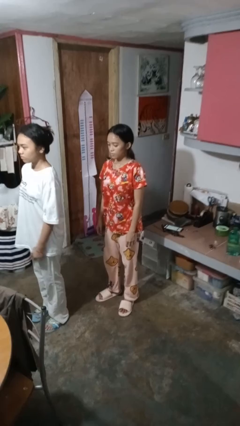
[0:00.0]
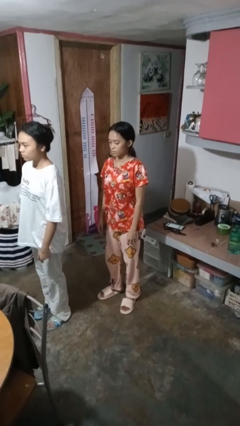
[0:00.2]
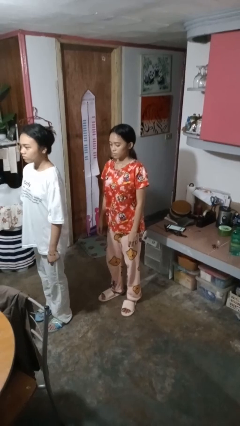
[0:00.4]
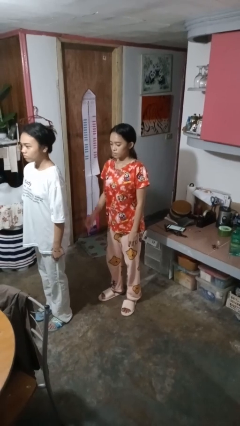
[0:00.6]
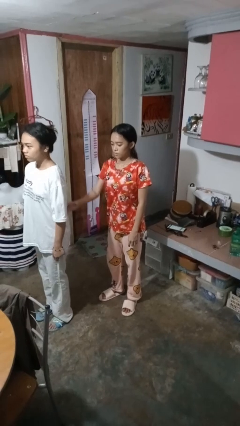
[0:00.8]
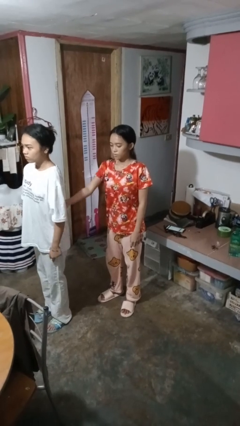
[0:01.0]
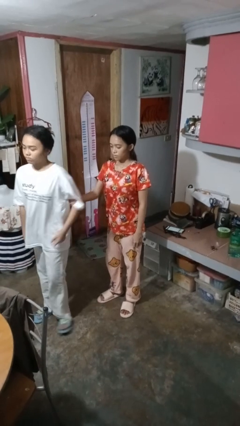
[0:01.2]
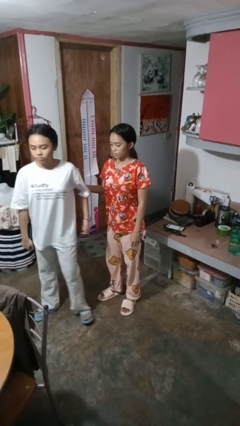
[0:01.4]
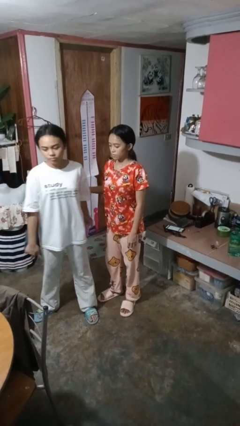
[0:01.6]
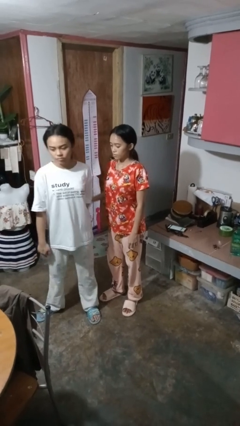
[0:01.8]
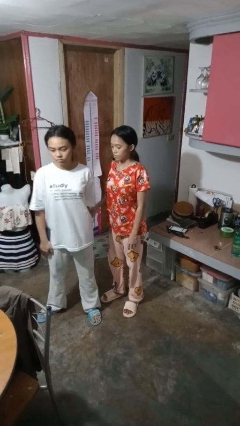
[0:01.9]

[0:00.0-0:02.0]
person grabs person by bicep

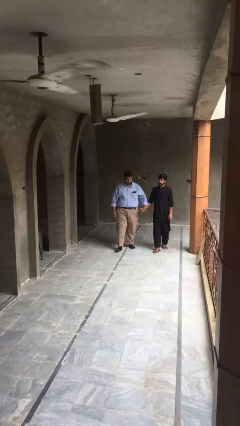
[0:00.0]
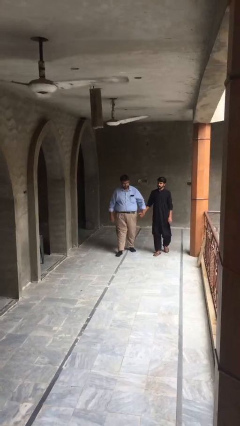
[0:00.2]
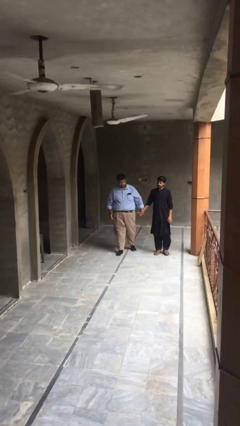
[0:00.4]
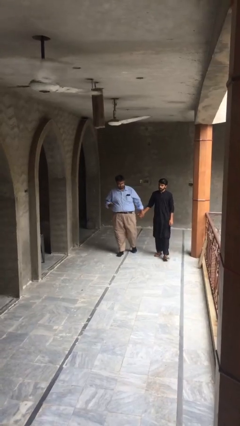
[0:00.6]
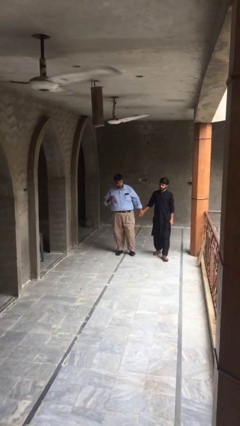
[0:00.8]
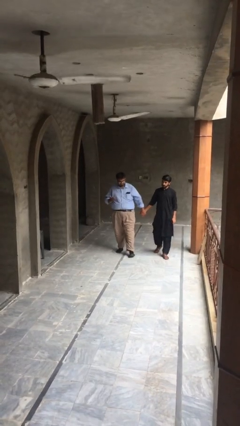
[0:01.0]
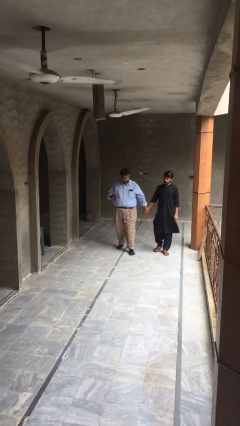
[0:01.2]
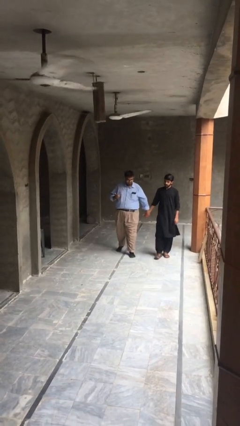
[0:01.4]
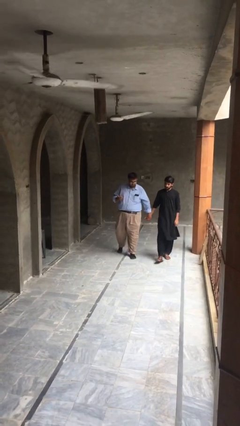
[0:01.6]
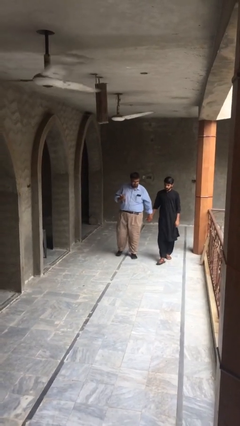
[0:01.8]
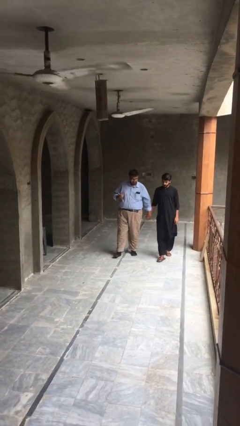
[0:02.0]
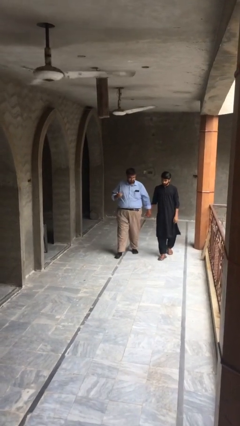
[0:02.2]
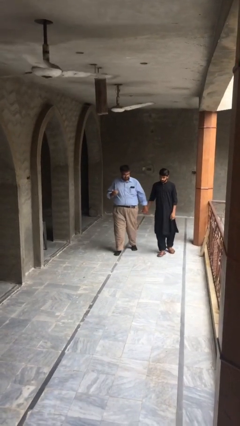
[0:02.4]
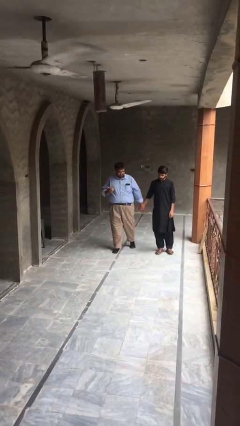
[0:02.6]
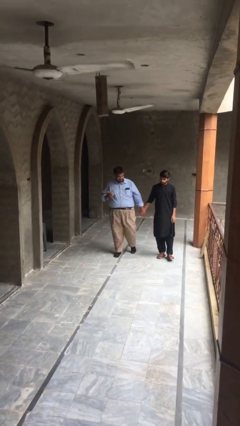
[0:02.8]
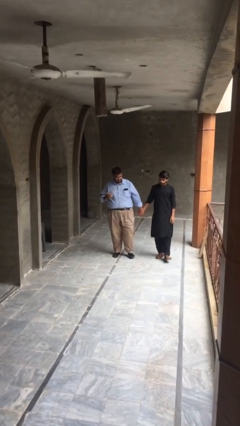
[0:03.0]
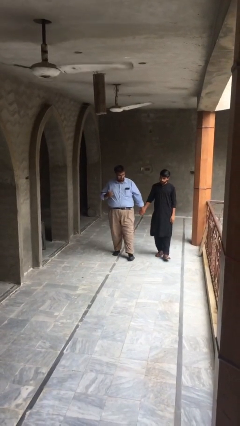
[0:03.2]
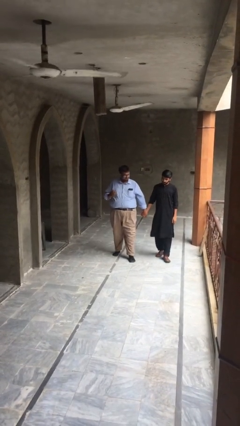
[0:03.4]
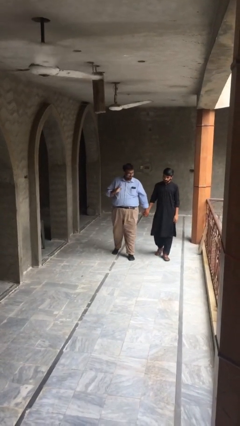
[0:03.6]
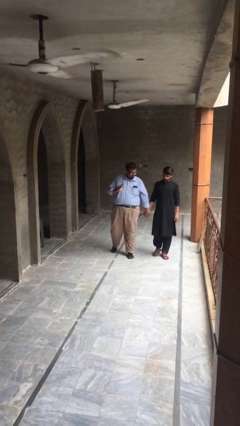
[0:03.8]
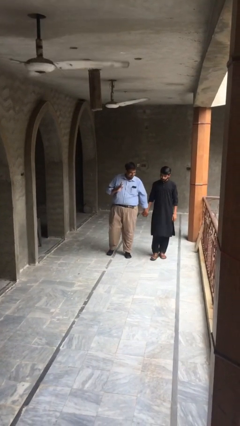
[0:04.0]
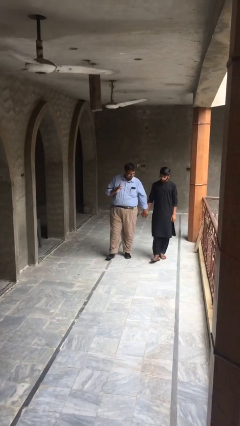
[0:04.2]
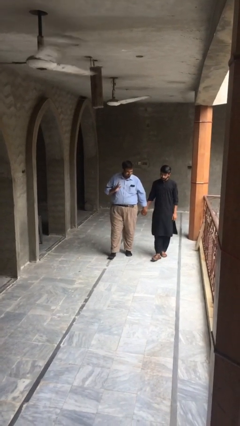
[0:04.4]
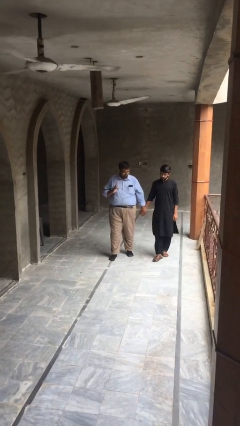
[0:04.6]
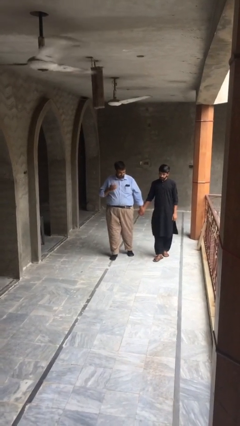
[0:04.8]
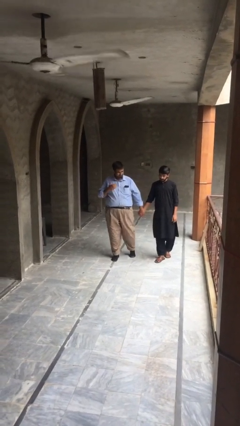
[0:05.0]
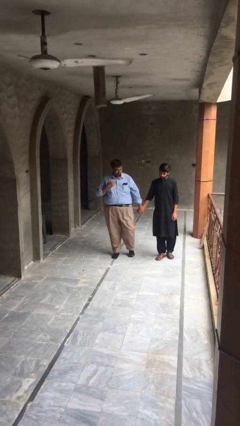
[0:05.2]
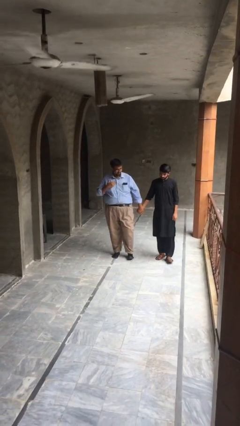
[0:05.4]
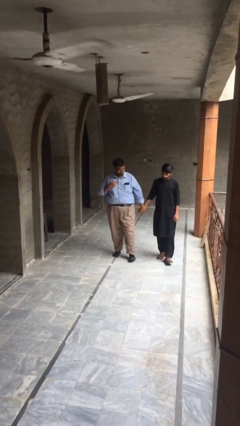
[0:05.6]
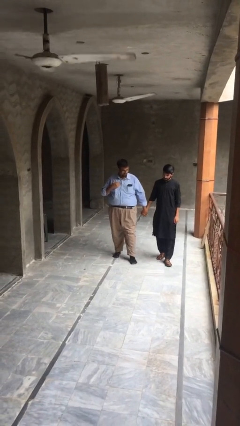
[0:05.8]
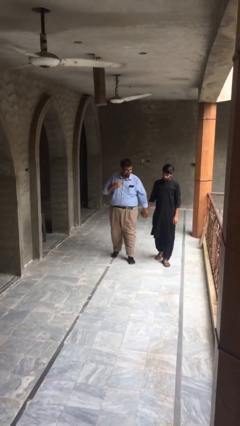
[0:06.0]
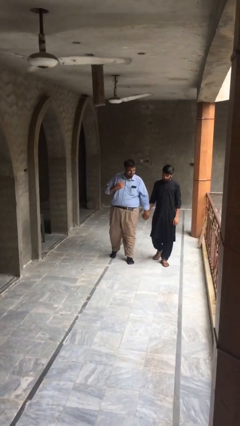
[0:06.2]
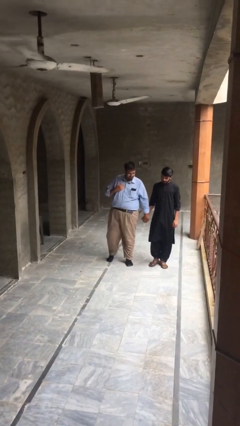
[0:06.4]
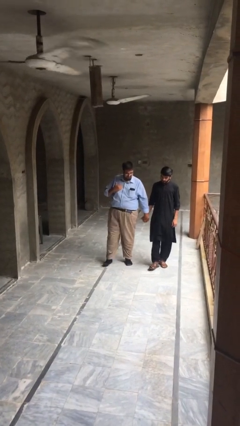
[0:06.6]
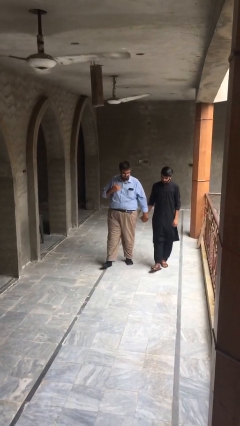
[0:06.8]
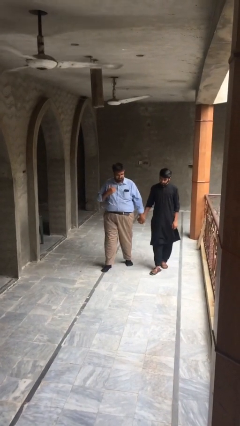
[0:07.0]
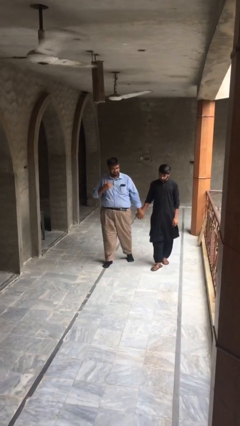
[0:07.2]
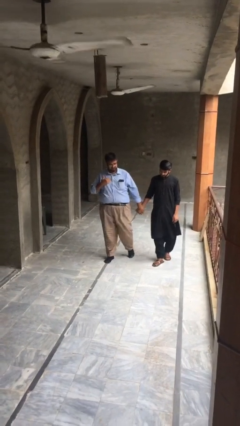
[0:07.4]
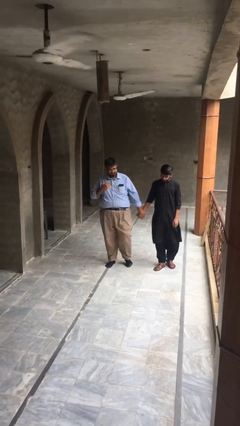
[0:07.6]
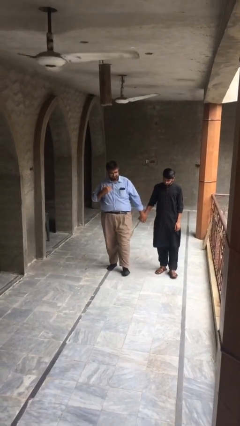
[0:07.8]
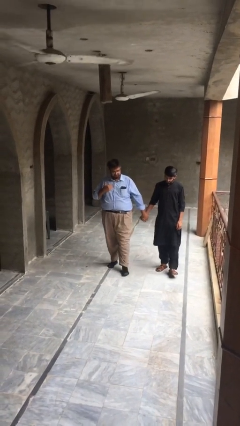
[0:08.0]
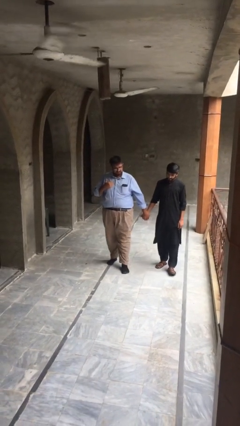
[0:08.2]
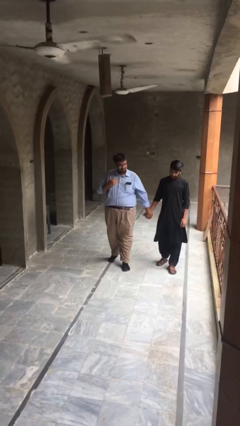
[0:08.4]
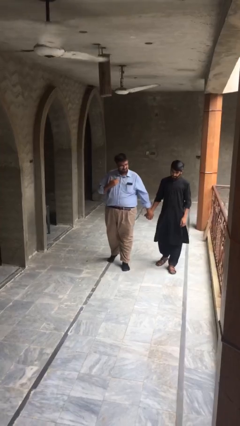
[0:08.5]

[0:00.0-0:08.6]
person holds hand

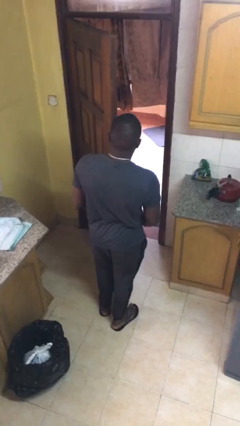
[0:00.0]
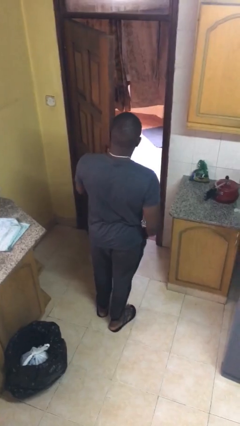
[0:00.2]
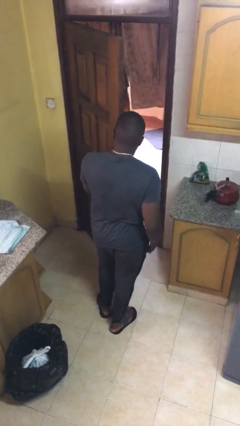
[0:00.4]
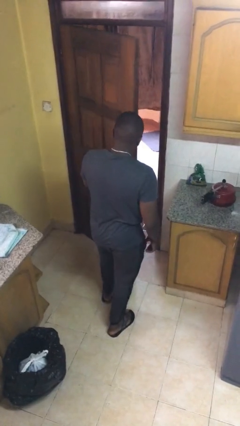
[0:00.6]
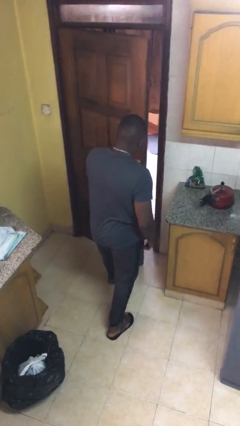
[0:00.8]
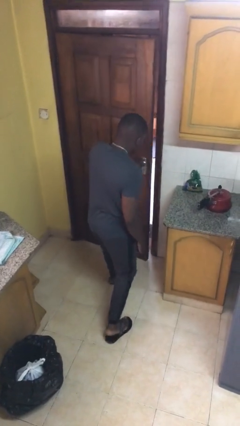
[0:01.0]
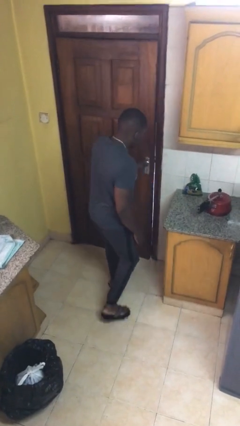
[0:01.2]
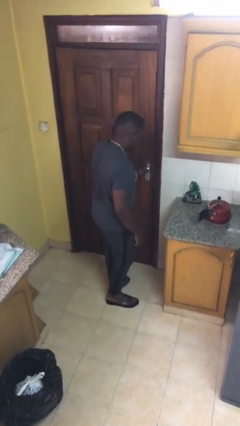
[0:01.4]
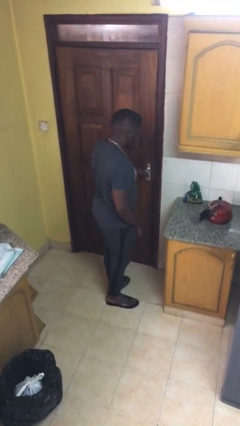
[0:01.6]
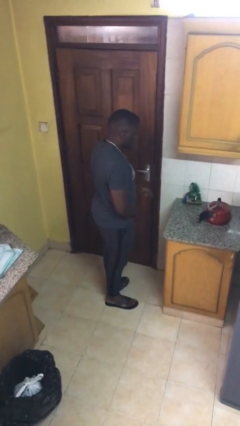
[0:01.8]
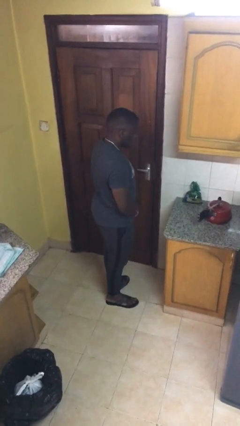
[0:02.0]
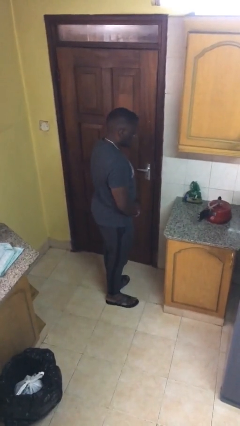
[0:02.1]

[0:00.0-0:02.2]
person closes facility door

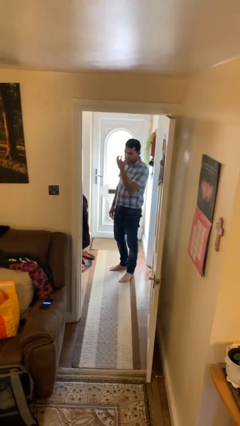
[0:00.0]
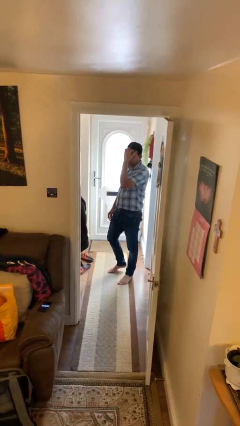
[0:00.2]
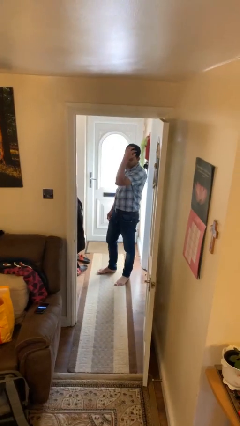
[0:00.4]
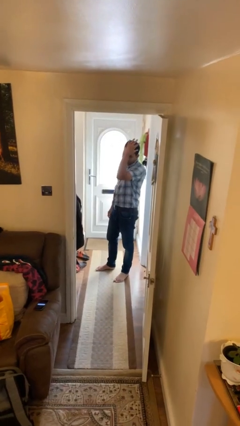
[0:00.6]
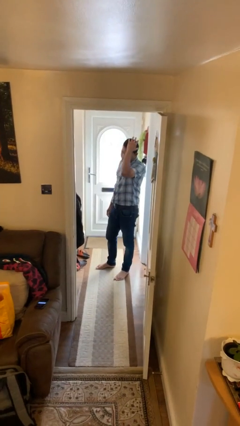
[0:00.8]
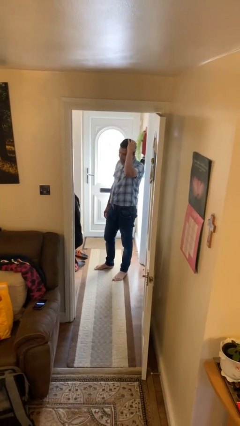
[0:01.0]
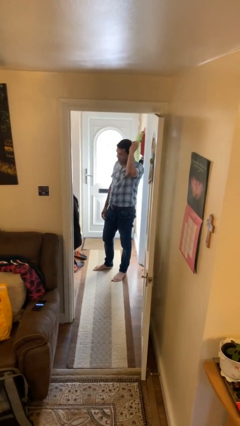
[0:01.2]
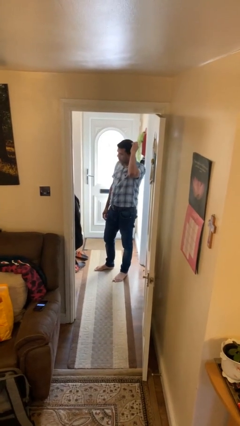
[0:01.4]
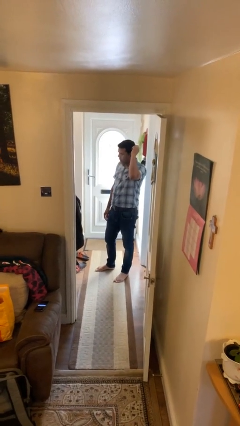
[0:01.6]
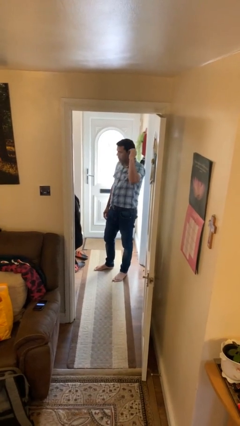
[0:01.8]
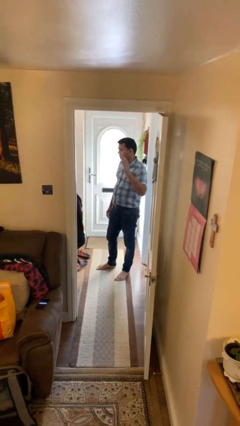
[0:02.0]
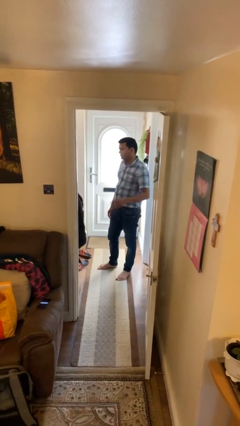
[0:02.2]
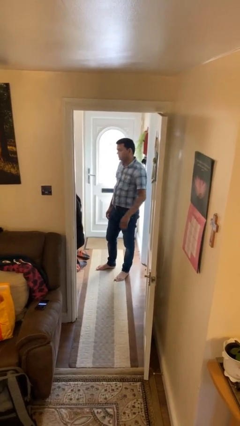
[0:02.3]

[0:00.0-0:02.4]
person strokes hair

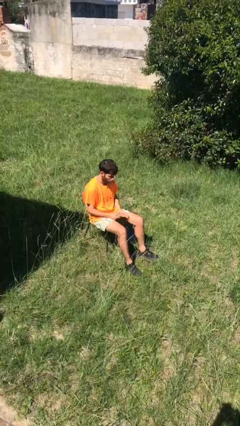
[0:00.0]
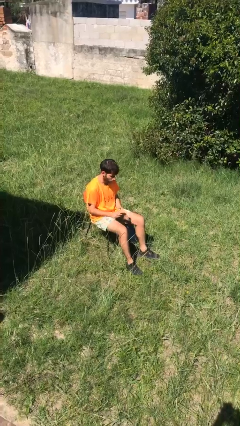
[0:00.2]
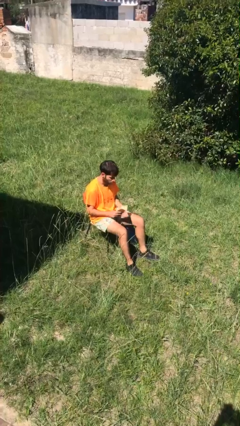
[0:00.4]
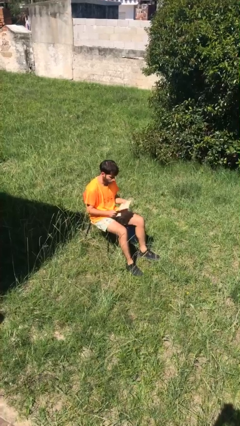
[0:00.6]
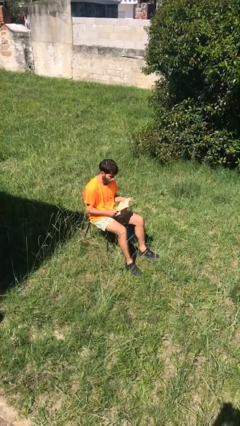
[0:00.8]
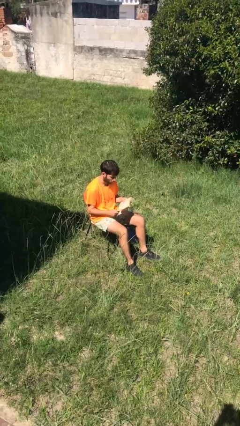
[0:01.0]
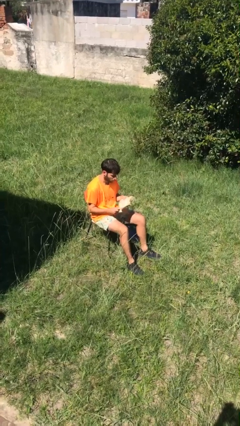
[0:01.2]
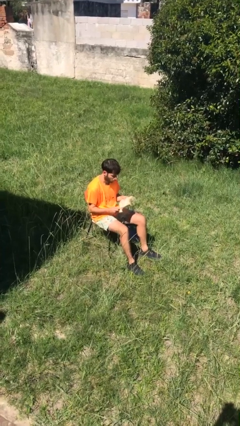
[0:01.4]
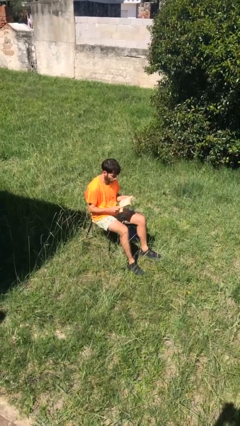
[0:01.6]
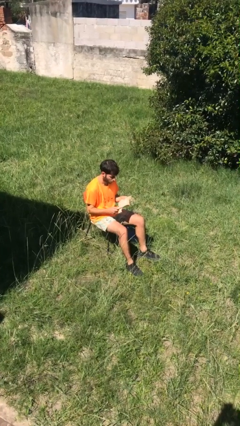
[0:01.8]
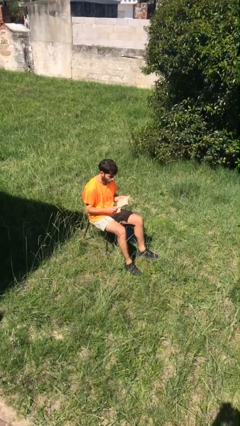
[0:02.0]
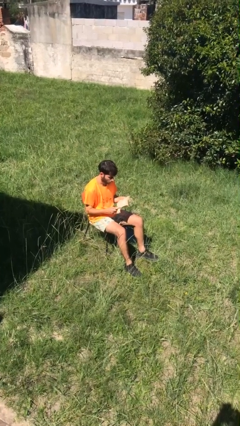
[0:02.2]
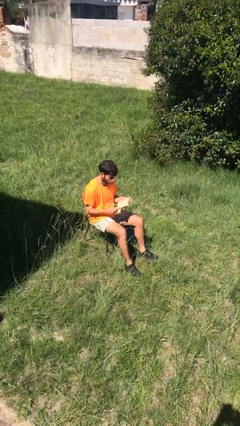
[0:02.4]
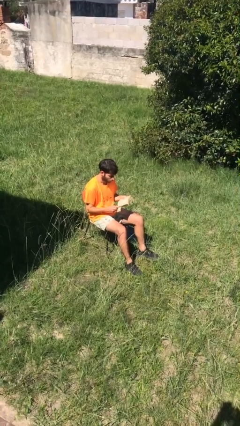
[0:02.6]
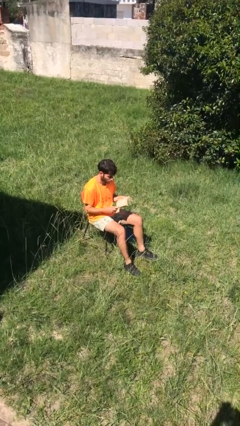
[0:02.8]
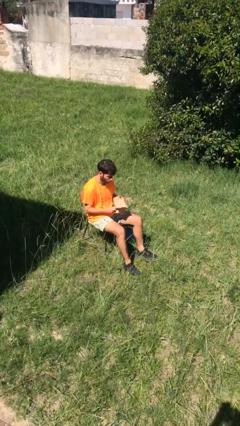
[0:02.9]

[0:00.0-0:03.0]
person reads document
